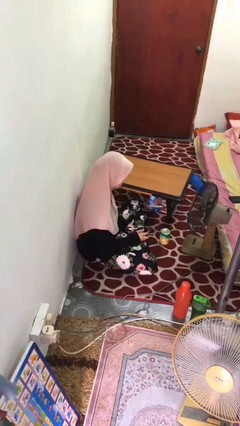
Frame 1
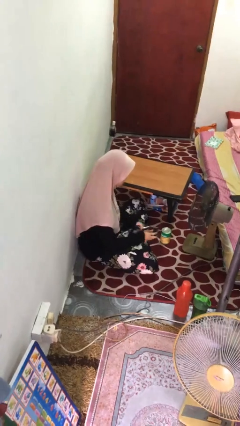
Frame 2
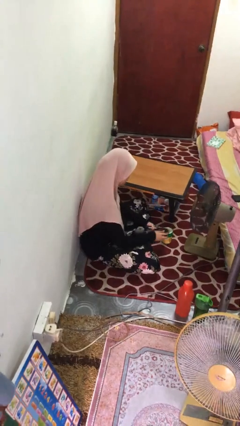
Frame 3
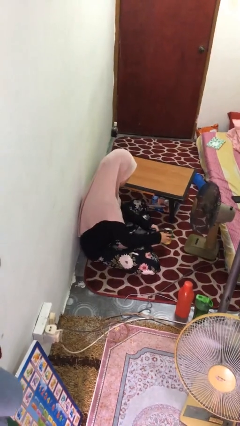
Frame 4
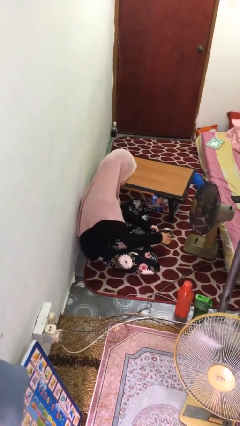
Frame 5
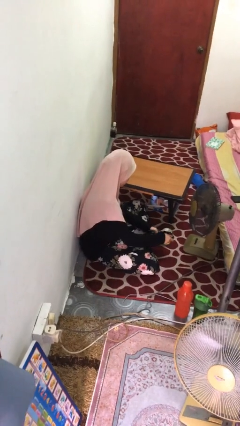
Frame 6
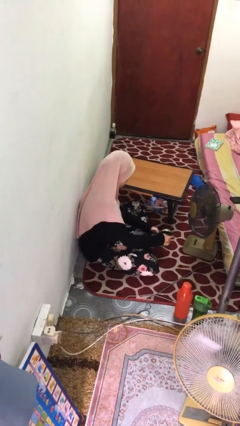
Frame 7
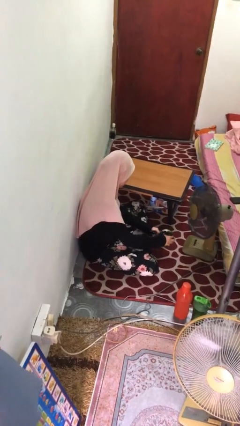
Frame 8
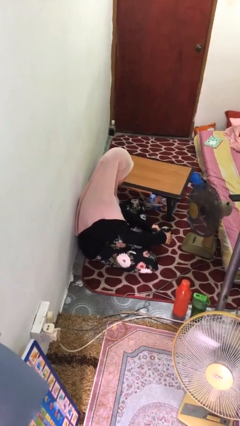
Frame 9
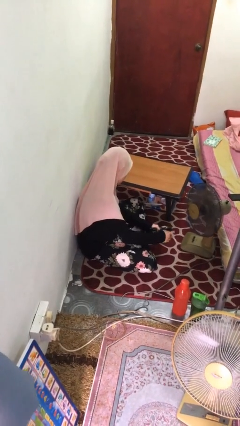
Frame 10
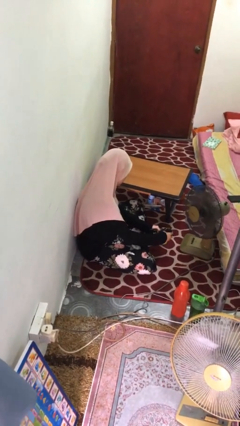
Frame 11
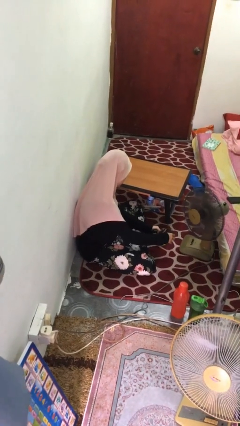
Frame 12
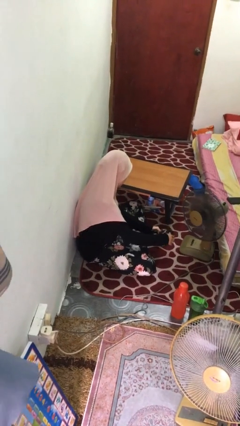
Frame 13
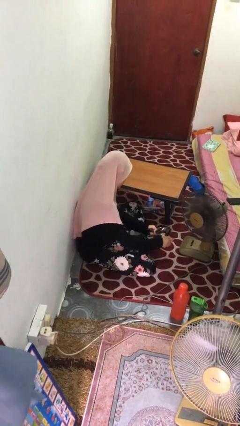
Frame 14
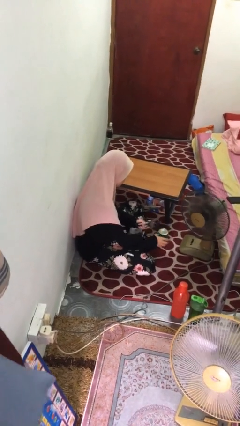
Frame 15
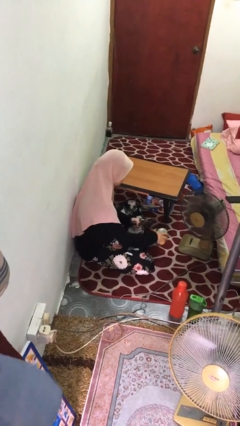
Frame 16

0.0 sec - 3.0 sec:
person opens can with can opener

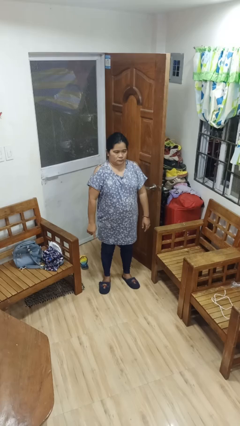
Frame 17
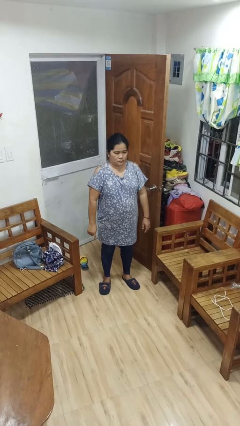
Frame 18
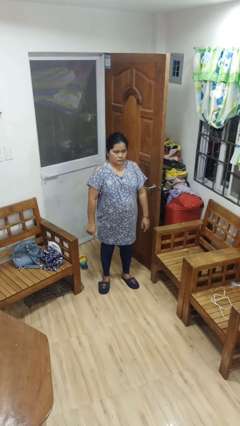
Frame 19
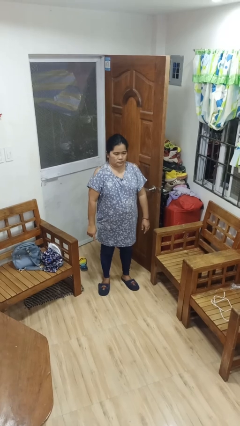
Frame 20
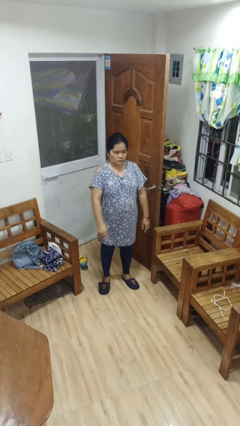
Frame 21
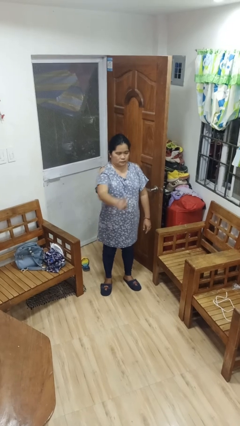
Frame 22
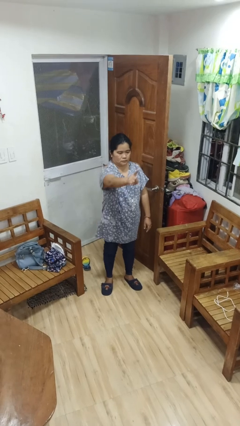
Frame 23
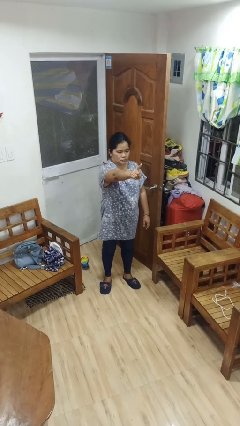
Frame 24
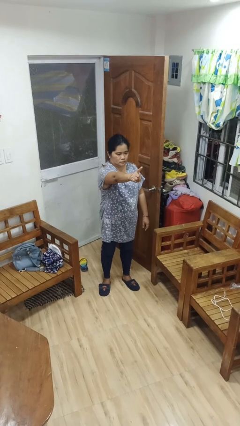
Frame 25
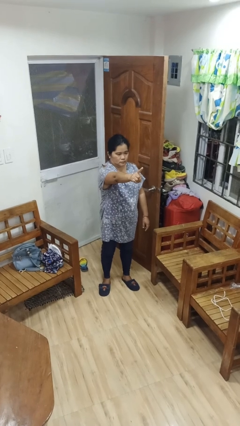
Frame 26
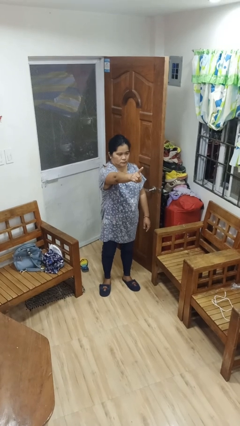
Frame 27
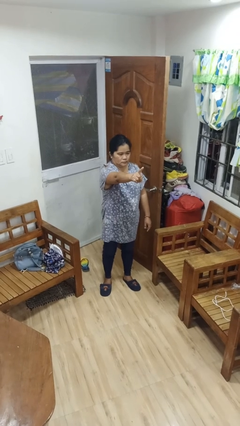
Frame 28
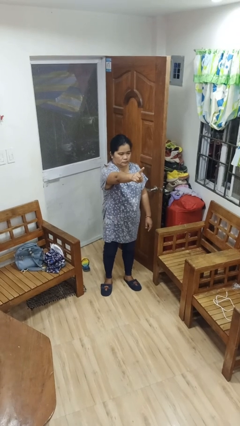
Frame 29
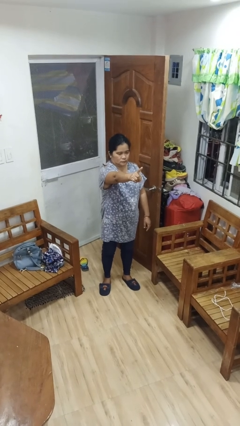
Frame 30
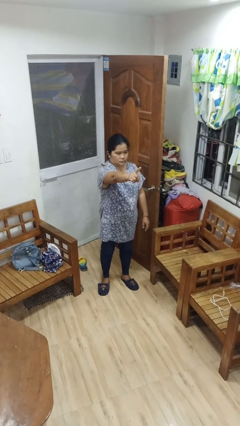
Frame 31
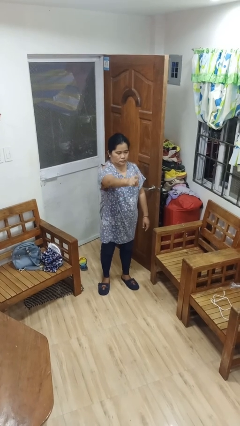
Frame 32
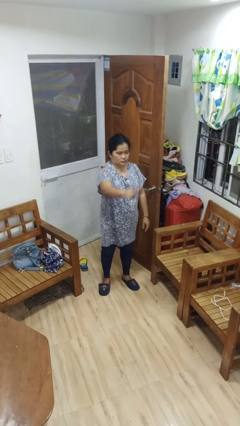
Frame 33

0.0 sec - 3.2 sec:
person gestures number one

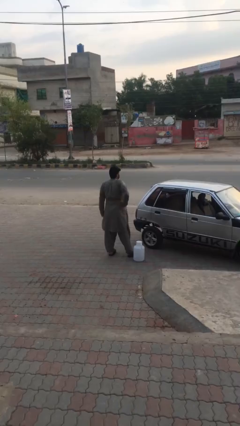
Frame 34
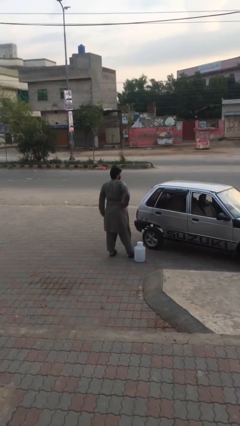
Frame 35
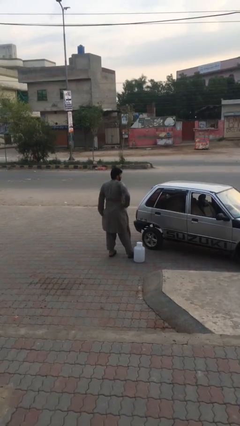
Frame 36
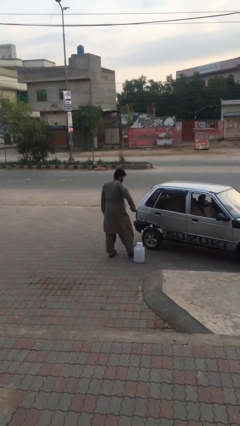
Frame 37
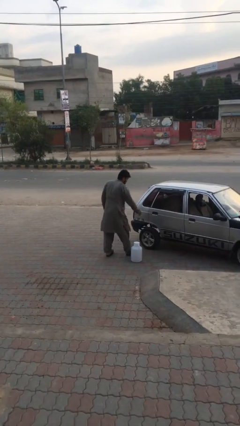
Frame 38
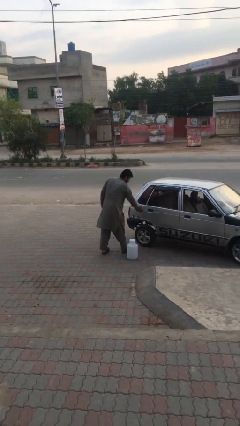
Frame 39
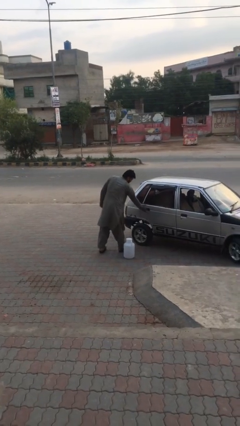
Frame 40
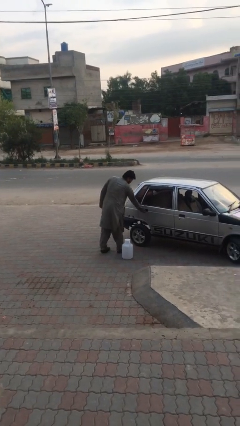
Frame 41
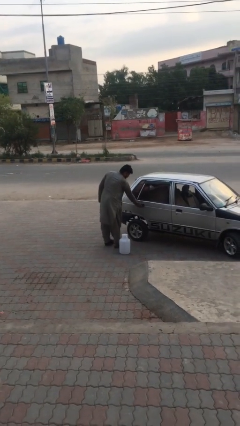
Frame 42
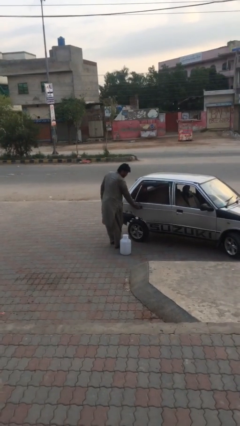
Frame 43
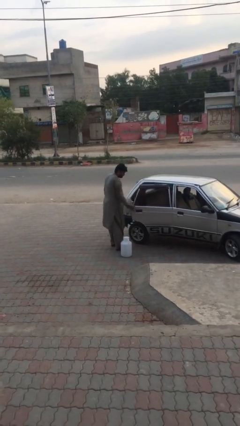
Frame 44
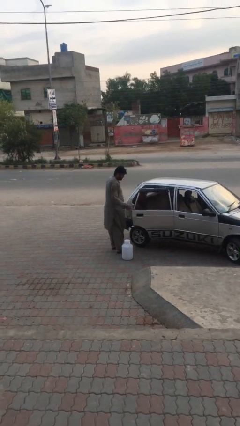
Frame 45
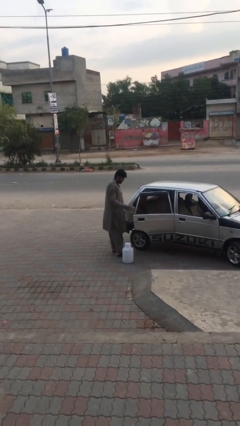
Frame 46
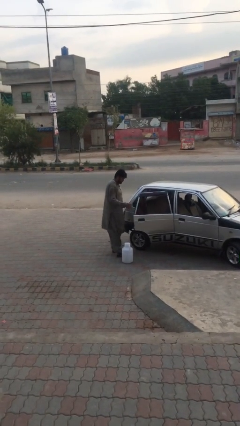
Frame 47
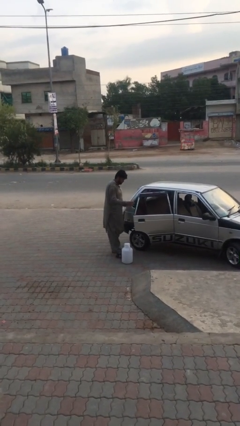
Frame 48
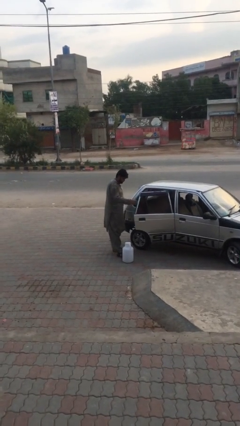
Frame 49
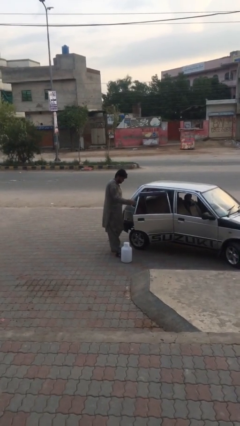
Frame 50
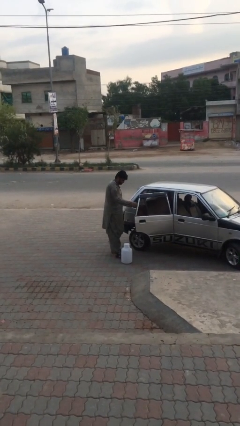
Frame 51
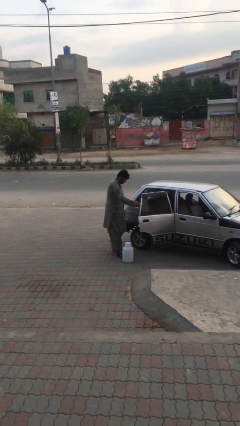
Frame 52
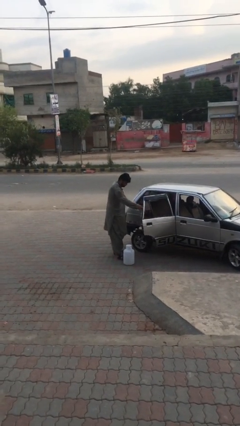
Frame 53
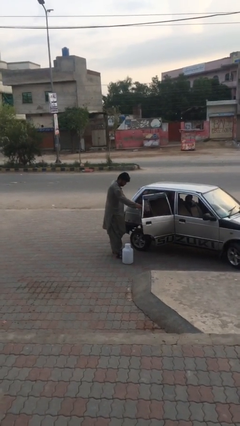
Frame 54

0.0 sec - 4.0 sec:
person opens car door

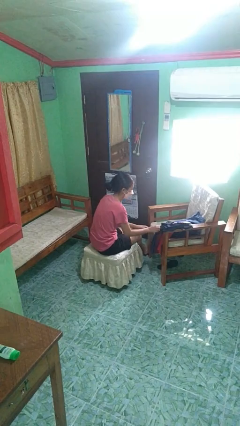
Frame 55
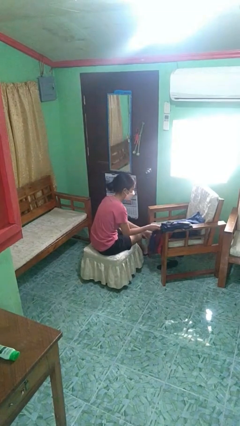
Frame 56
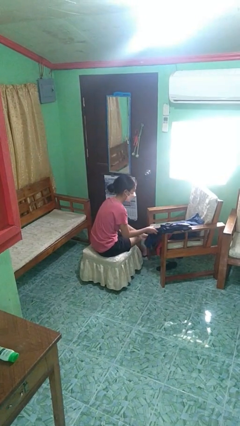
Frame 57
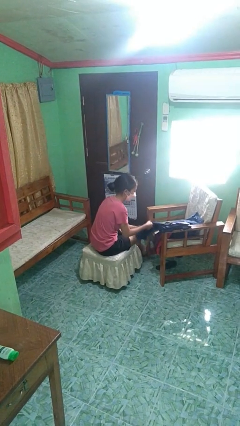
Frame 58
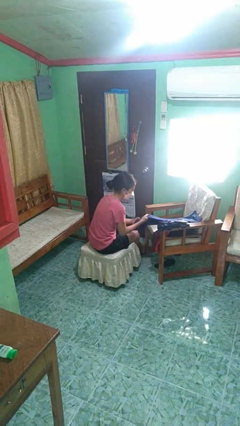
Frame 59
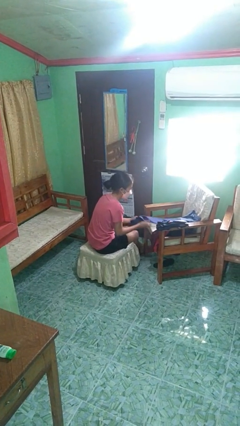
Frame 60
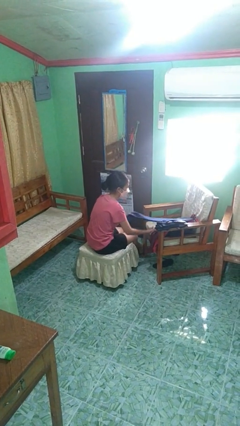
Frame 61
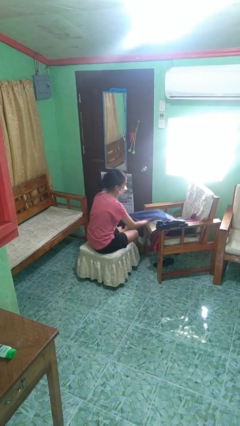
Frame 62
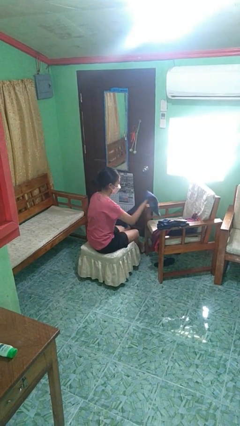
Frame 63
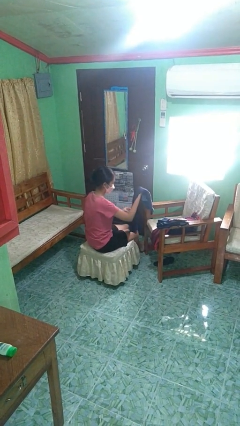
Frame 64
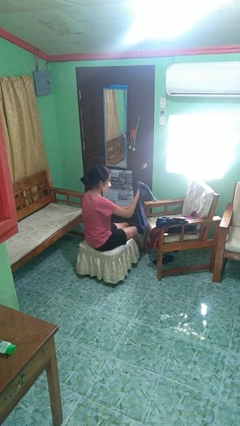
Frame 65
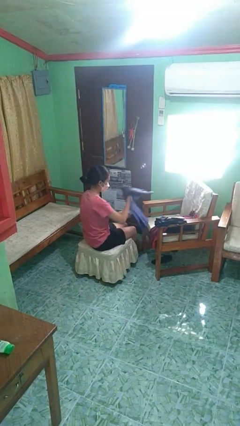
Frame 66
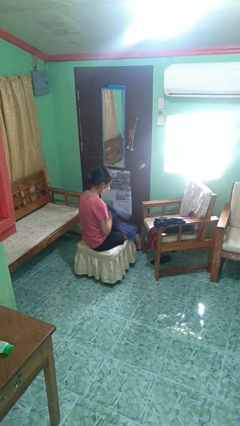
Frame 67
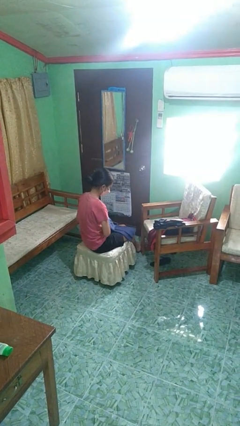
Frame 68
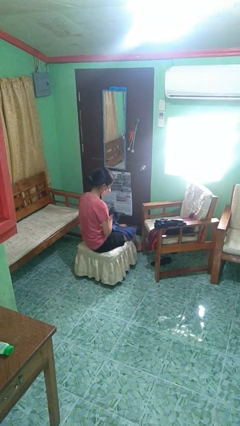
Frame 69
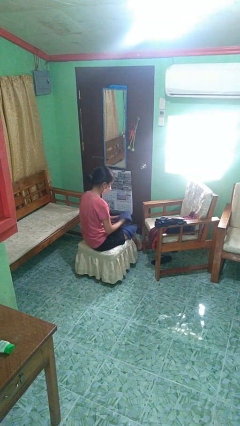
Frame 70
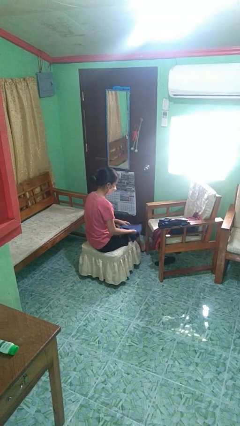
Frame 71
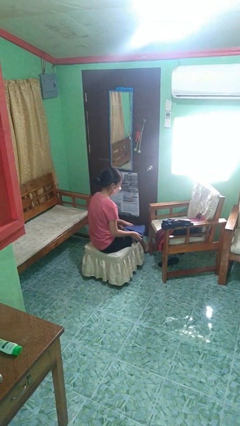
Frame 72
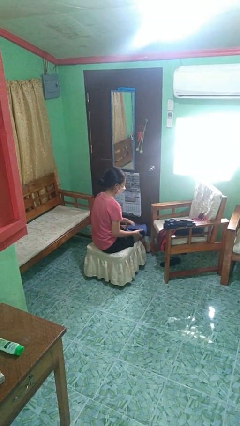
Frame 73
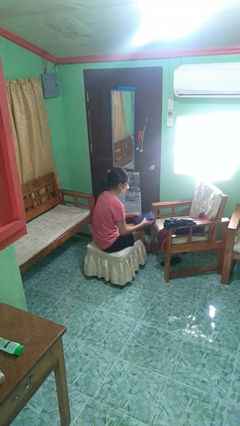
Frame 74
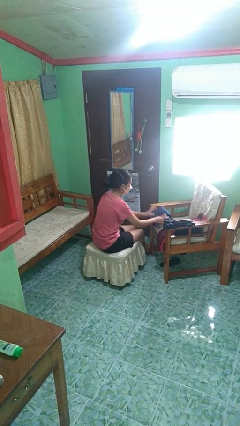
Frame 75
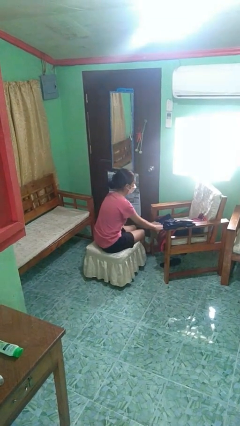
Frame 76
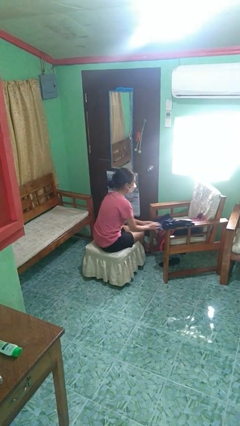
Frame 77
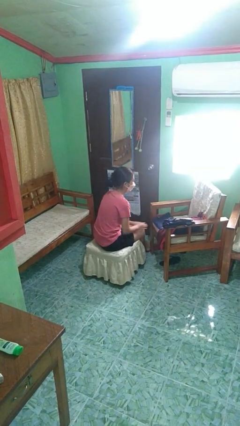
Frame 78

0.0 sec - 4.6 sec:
person folds shirt

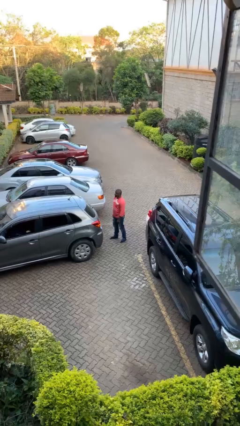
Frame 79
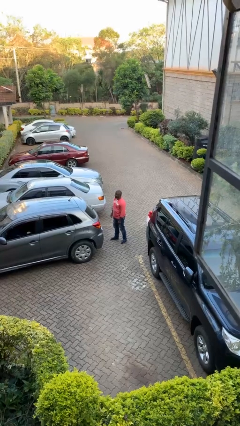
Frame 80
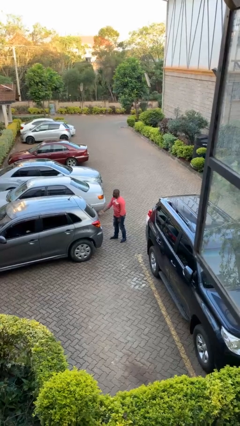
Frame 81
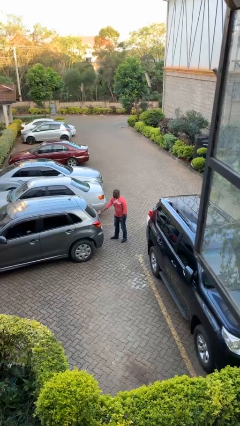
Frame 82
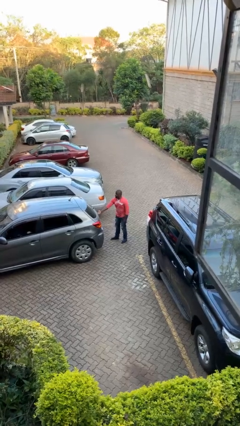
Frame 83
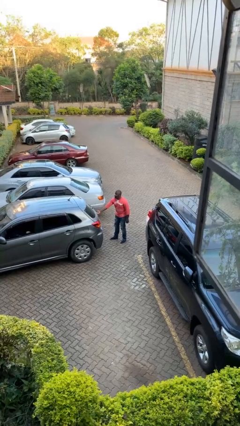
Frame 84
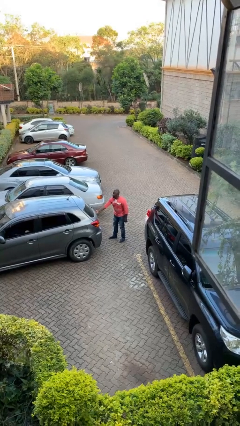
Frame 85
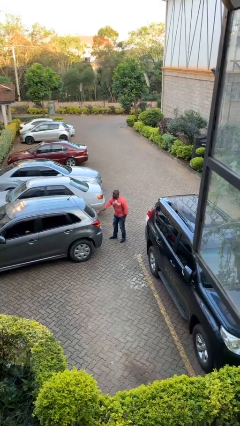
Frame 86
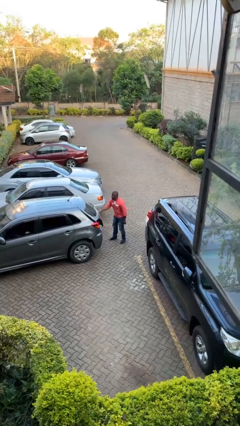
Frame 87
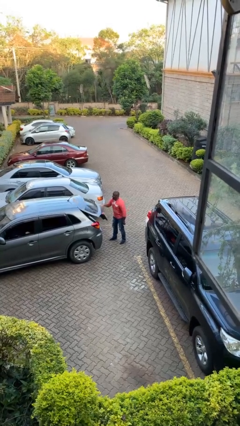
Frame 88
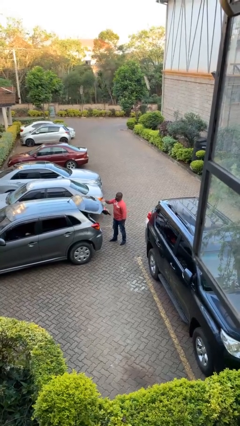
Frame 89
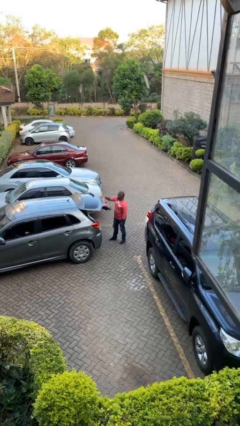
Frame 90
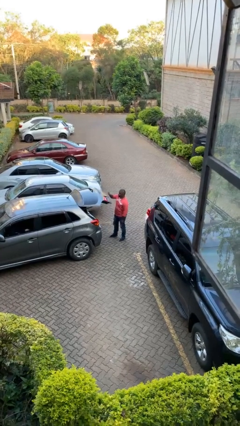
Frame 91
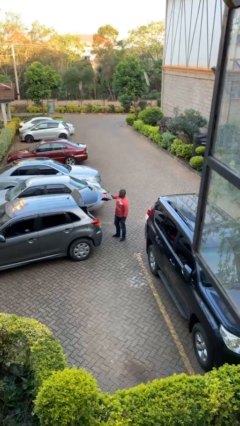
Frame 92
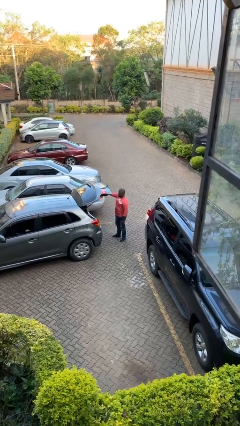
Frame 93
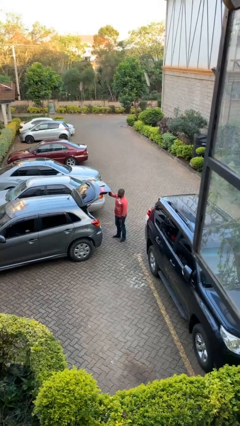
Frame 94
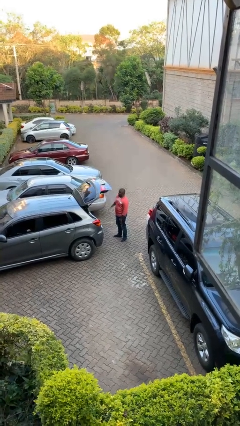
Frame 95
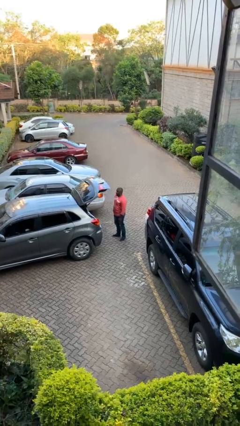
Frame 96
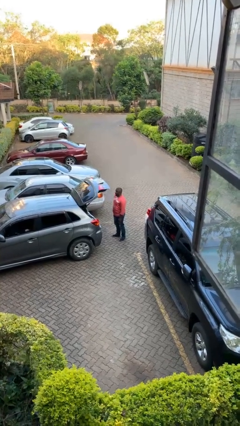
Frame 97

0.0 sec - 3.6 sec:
person opens car trunk
